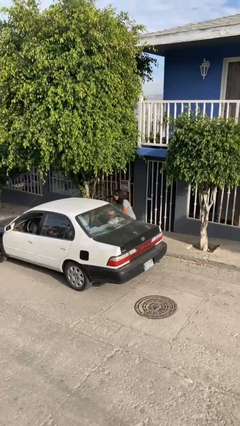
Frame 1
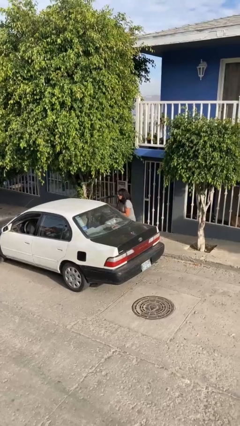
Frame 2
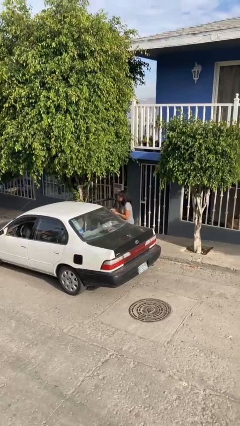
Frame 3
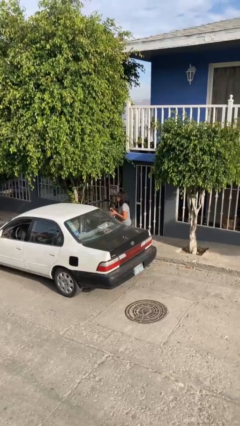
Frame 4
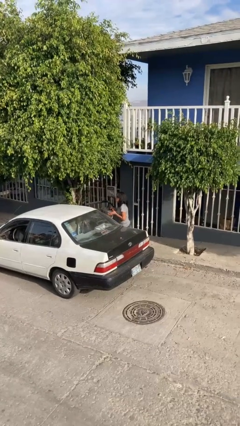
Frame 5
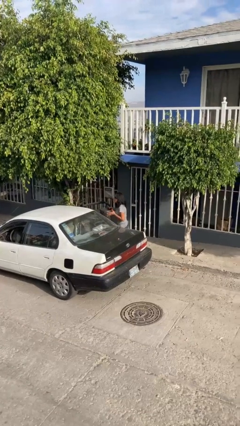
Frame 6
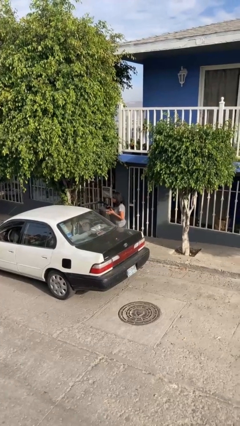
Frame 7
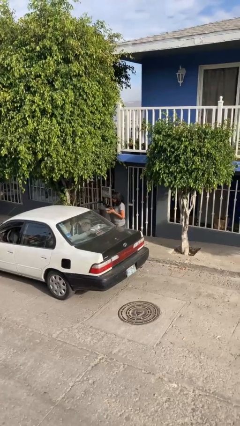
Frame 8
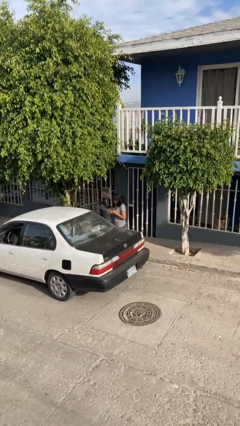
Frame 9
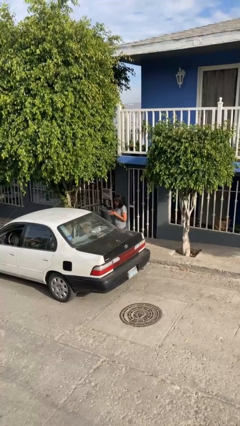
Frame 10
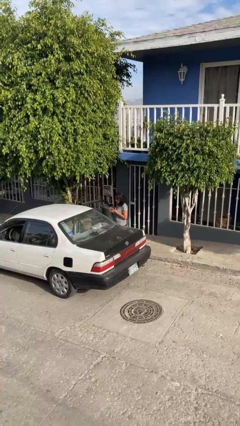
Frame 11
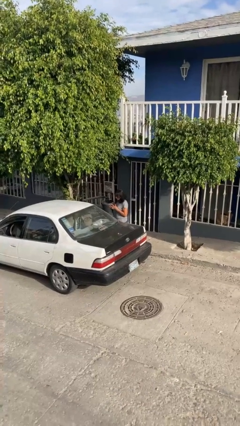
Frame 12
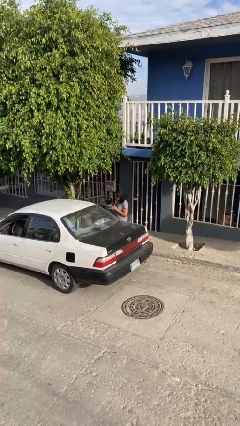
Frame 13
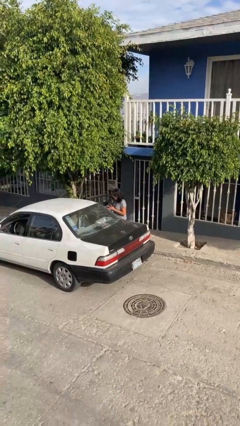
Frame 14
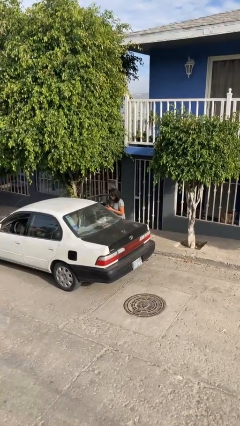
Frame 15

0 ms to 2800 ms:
person unloads car

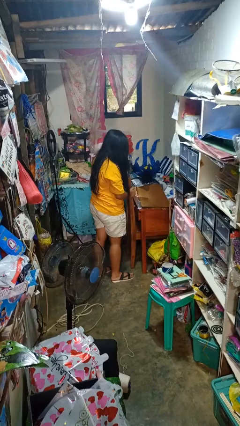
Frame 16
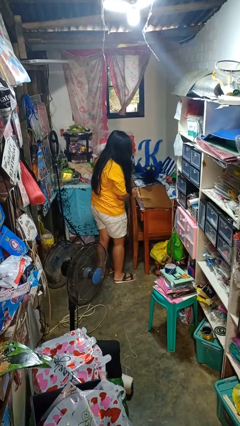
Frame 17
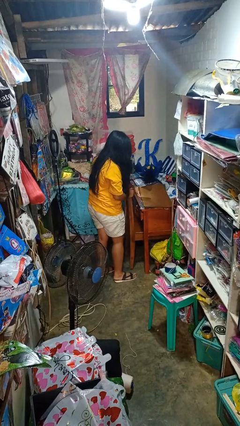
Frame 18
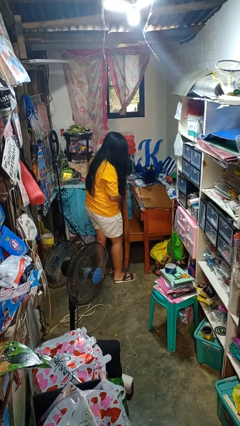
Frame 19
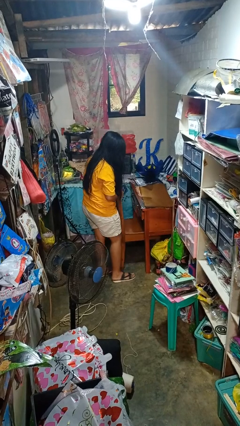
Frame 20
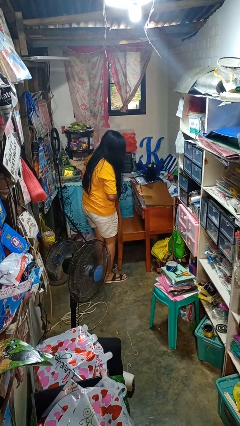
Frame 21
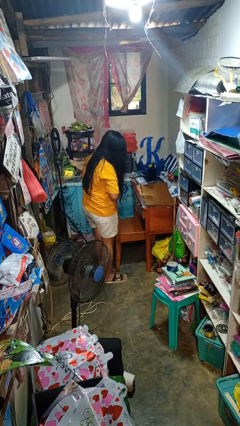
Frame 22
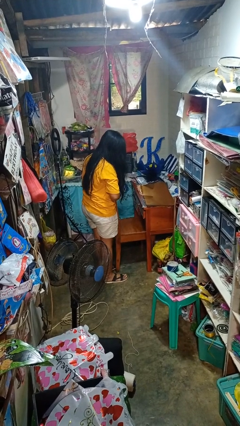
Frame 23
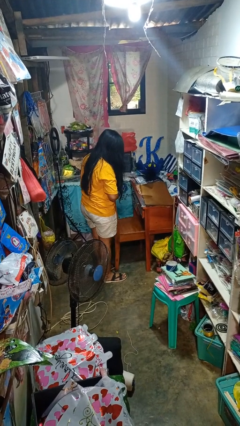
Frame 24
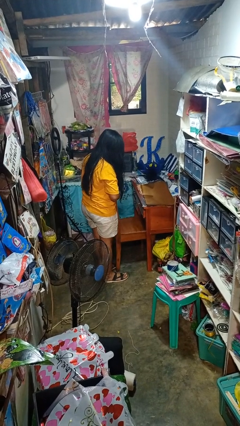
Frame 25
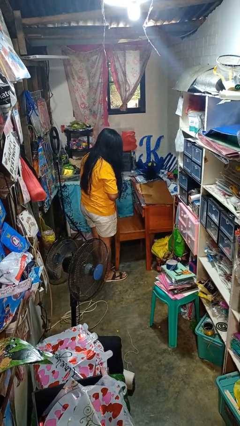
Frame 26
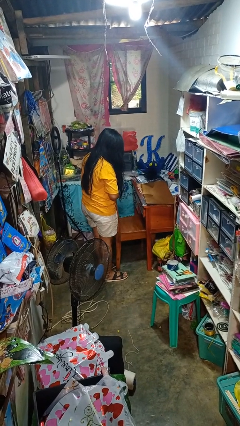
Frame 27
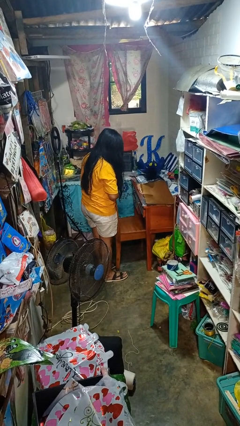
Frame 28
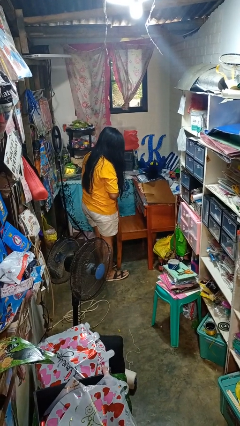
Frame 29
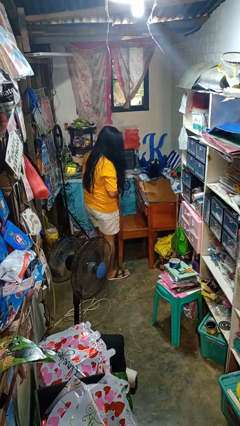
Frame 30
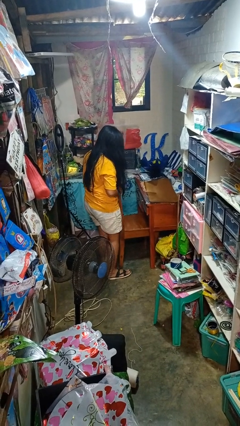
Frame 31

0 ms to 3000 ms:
person pulls out chair

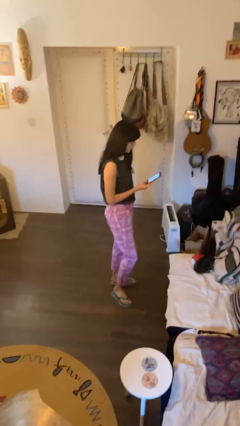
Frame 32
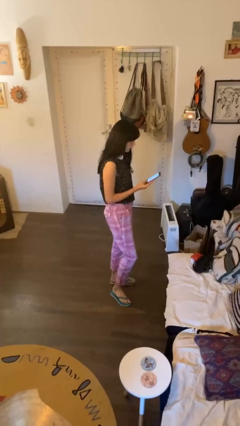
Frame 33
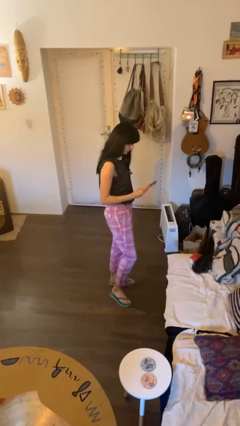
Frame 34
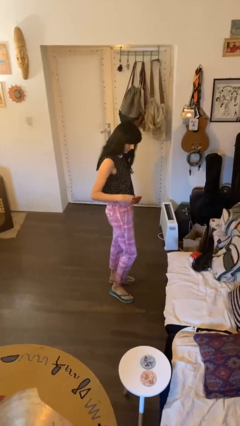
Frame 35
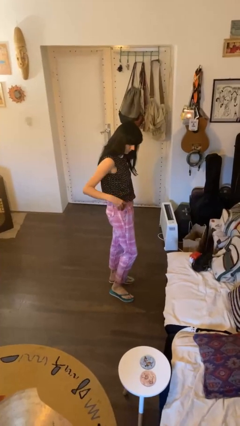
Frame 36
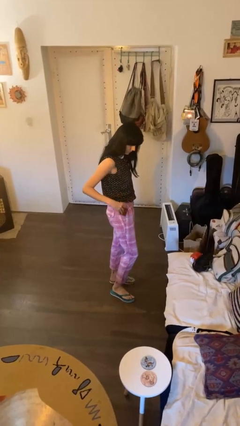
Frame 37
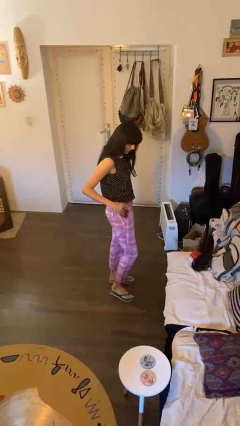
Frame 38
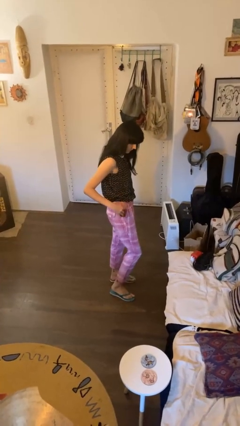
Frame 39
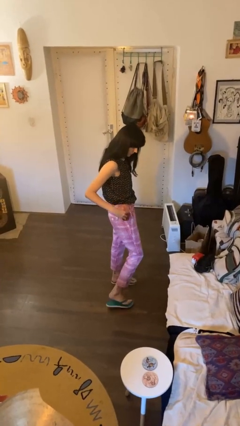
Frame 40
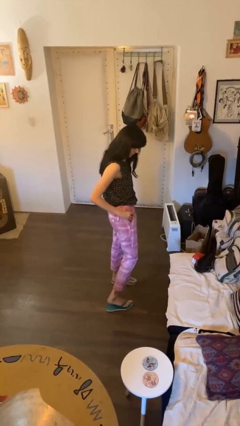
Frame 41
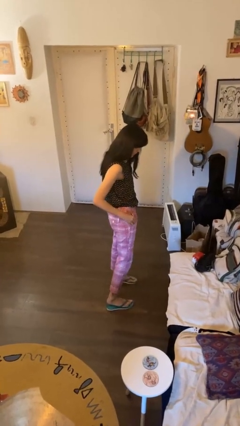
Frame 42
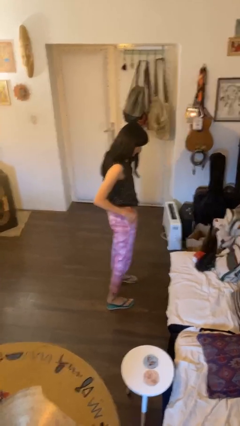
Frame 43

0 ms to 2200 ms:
person puts phone into pocket

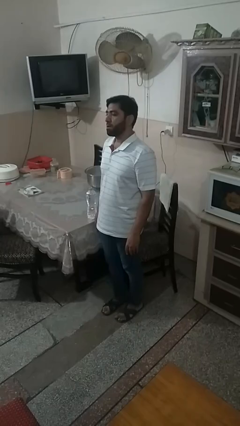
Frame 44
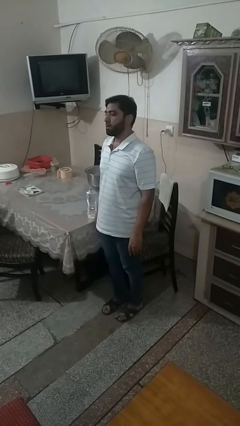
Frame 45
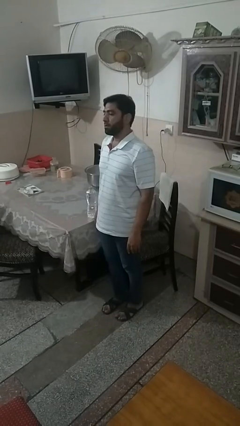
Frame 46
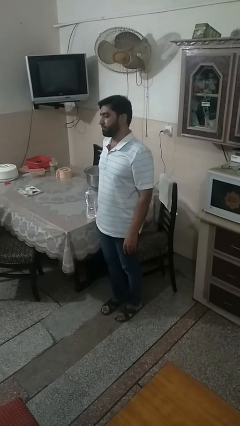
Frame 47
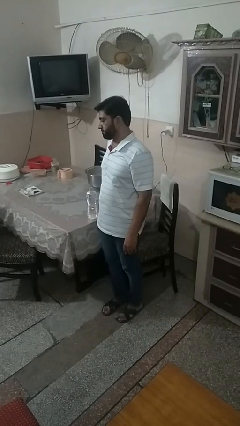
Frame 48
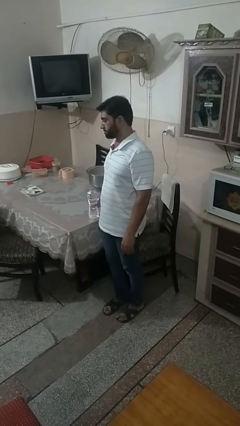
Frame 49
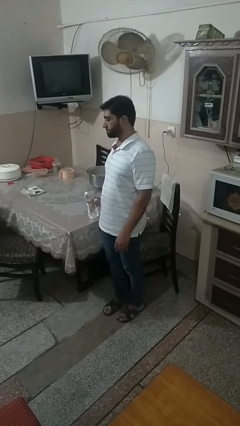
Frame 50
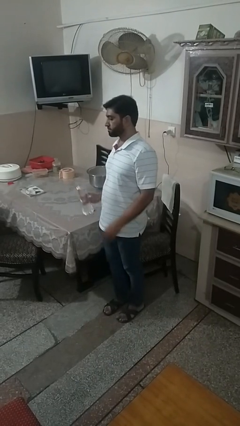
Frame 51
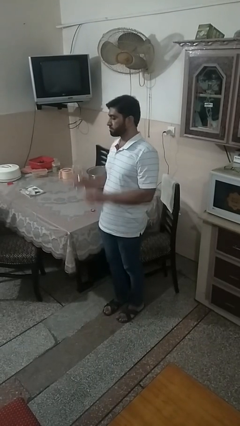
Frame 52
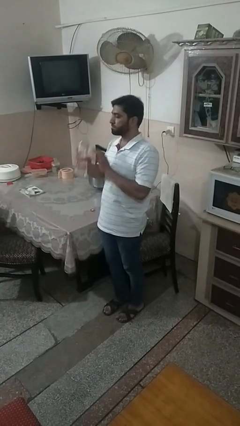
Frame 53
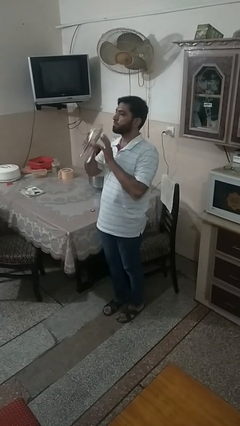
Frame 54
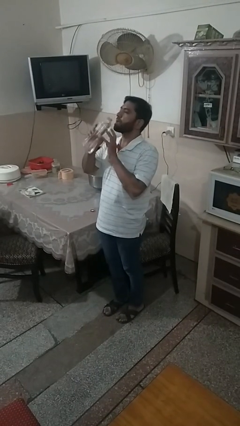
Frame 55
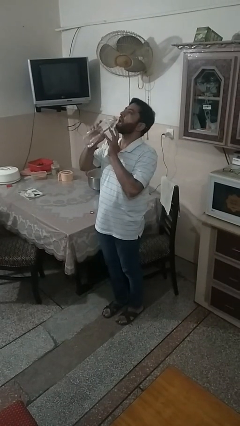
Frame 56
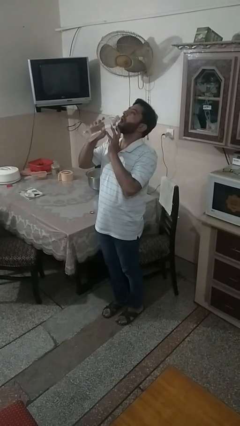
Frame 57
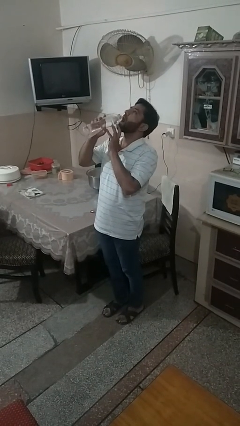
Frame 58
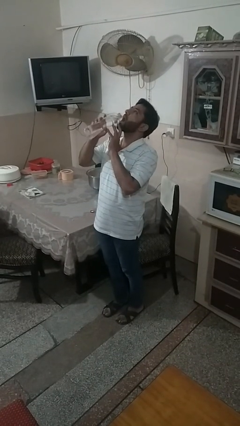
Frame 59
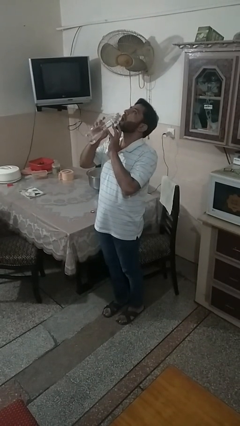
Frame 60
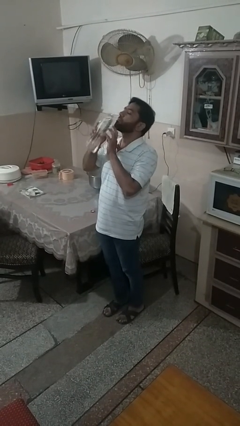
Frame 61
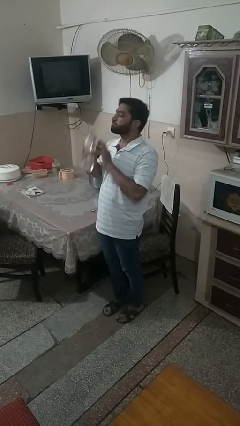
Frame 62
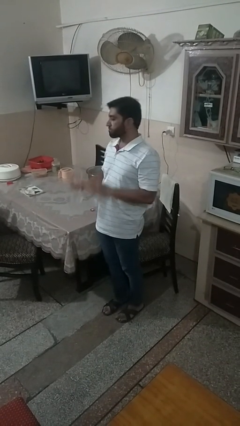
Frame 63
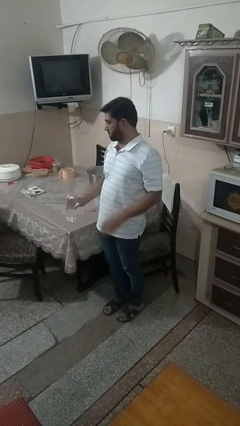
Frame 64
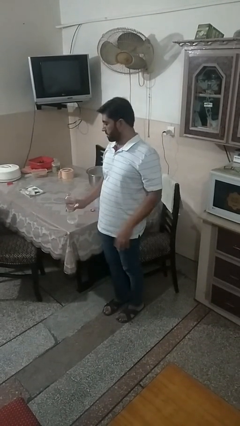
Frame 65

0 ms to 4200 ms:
person drinks from bottle

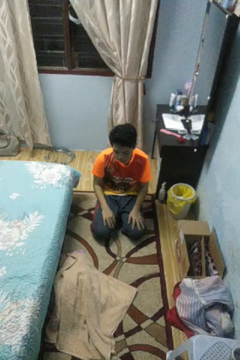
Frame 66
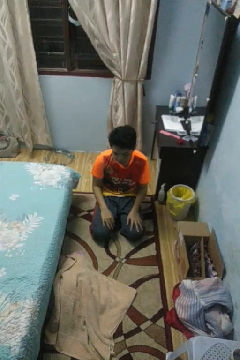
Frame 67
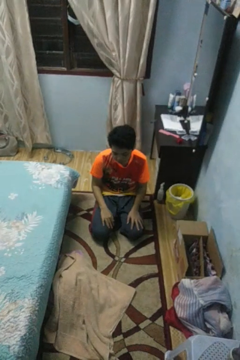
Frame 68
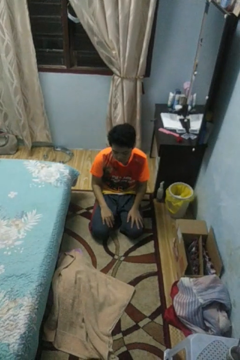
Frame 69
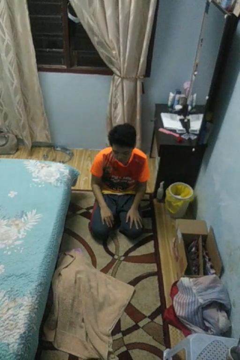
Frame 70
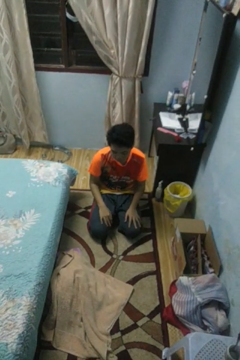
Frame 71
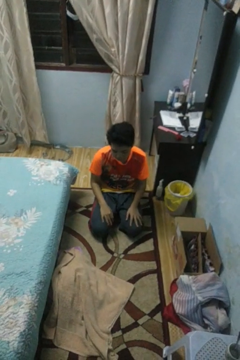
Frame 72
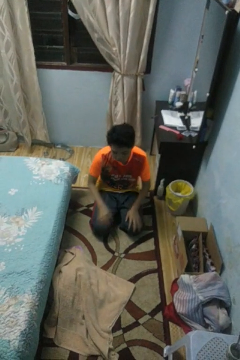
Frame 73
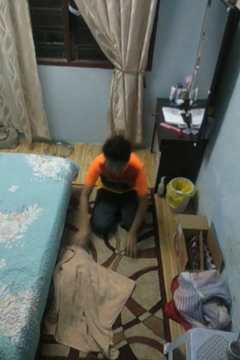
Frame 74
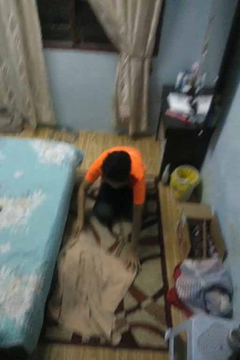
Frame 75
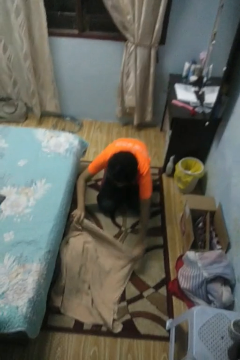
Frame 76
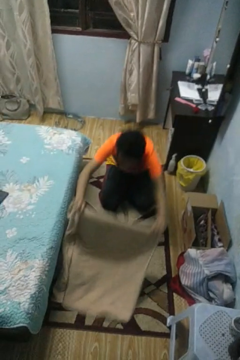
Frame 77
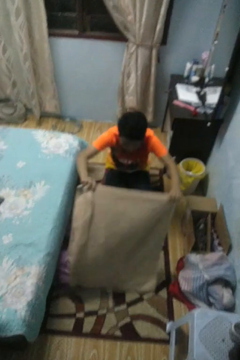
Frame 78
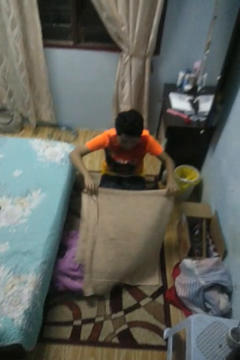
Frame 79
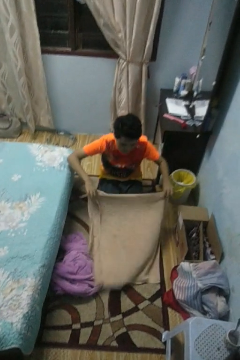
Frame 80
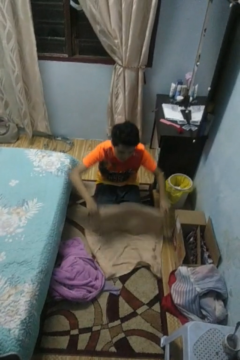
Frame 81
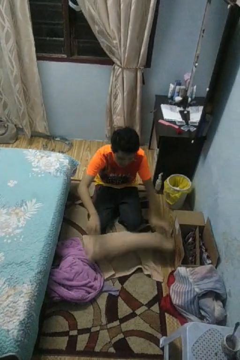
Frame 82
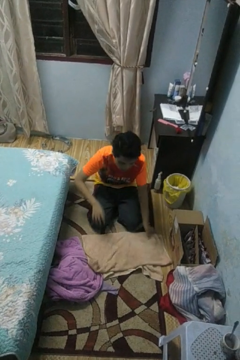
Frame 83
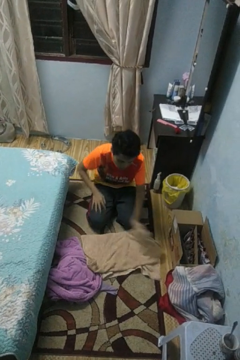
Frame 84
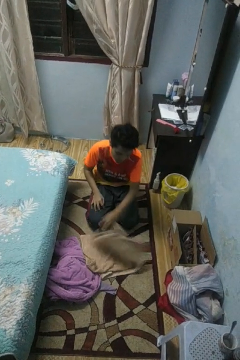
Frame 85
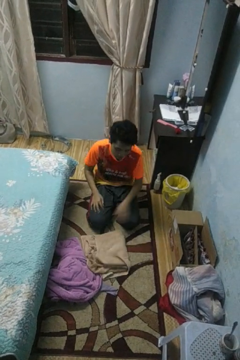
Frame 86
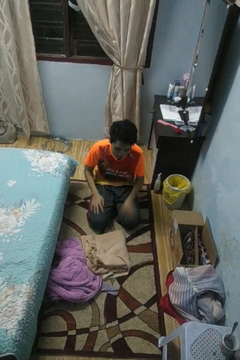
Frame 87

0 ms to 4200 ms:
person folds towel

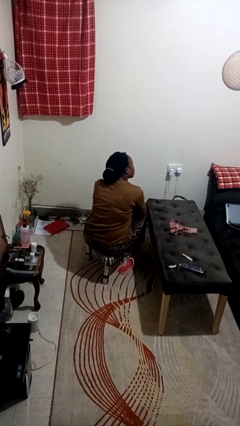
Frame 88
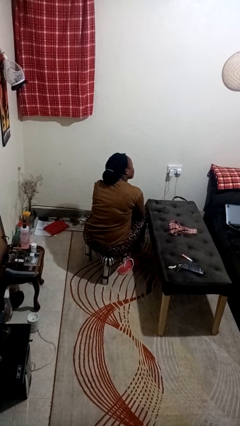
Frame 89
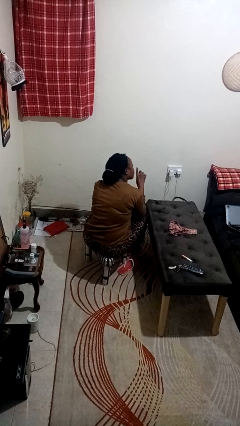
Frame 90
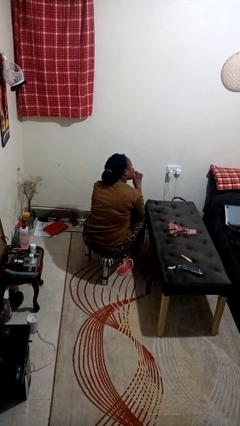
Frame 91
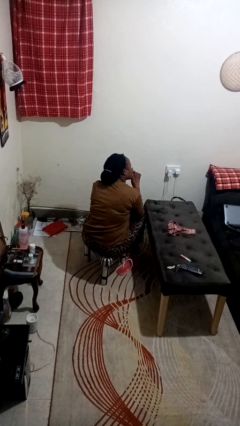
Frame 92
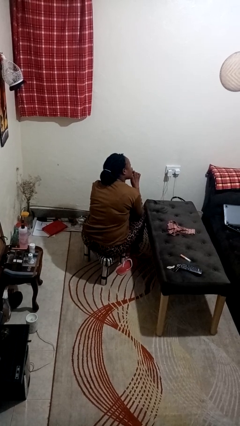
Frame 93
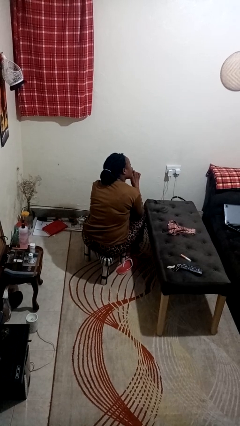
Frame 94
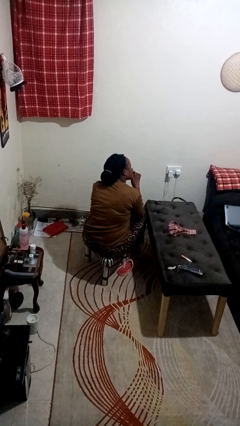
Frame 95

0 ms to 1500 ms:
person gestures be quiet

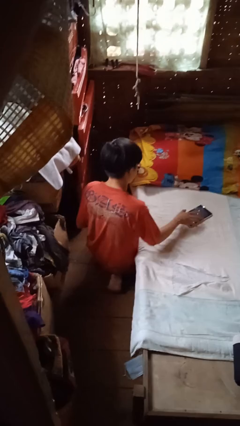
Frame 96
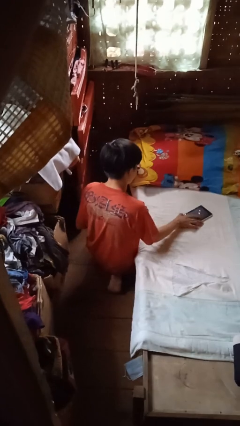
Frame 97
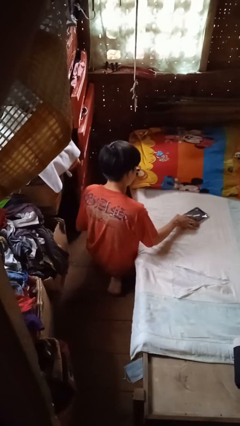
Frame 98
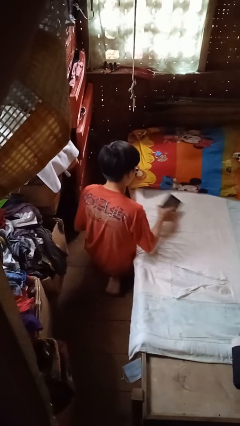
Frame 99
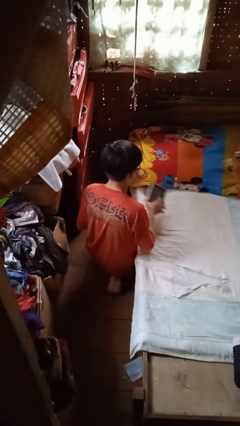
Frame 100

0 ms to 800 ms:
person picks up object from bed
